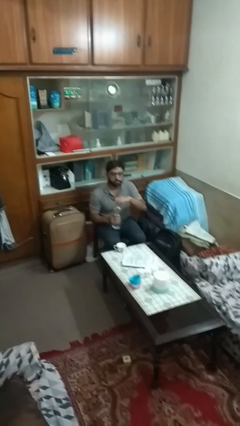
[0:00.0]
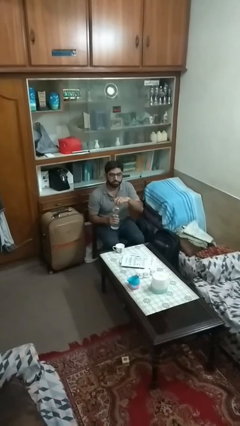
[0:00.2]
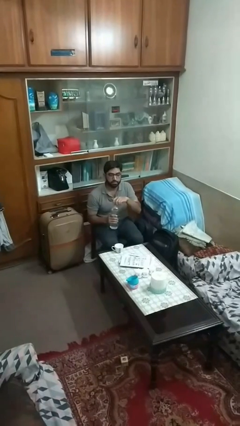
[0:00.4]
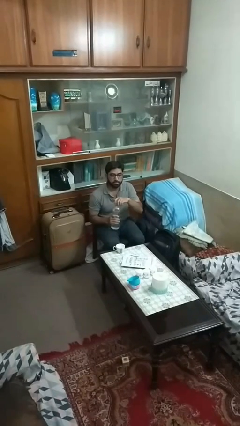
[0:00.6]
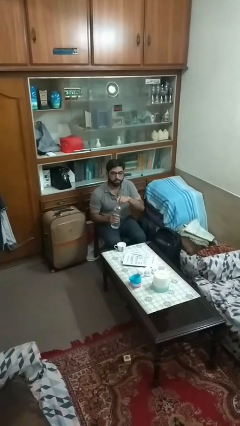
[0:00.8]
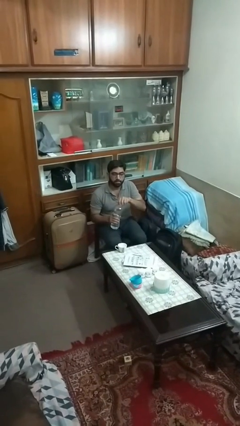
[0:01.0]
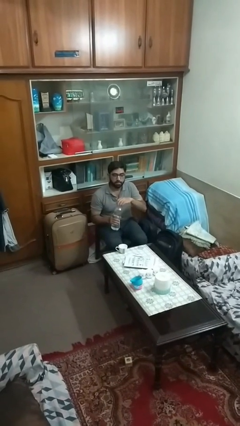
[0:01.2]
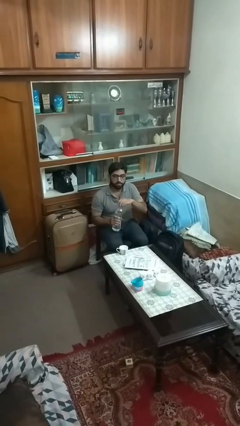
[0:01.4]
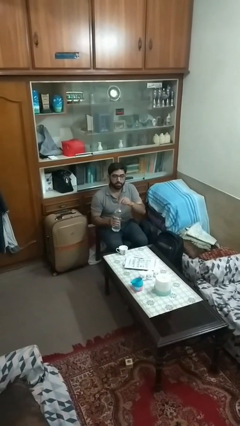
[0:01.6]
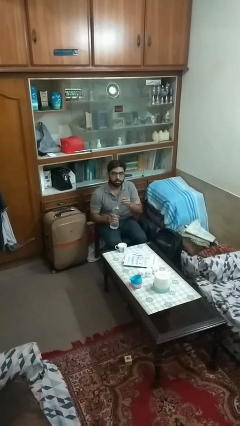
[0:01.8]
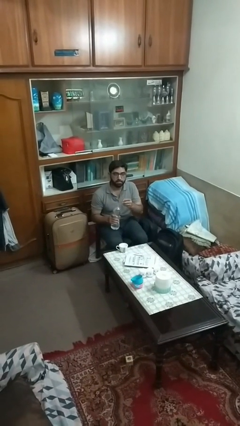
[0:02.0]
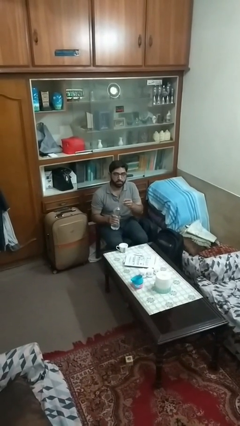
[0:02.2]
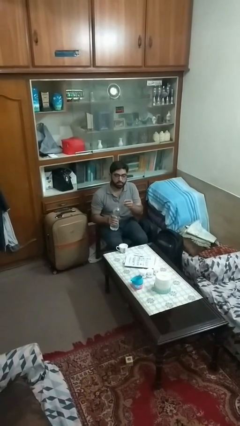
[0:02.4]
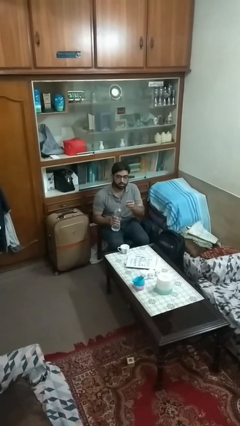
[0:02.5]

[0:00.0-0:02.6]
person unscrews lid from bottle

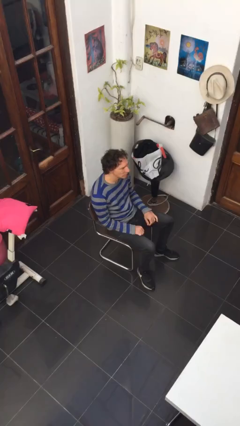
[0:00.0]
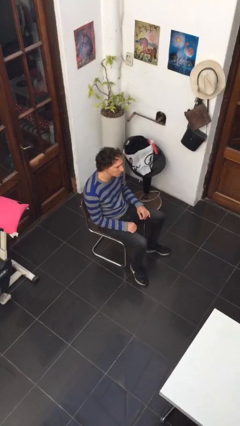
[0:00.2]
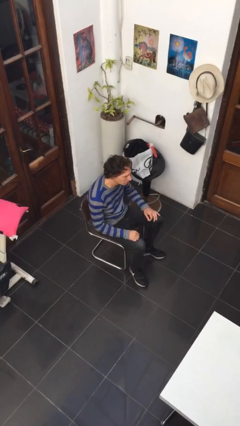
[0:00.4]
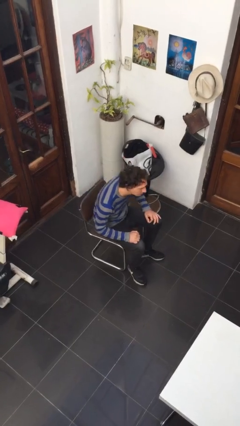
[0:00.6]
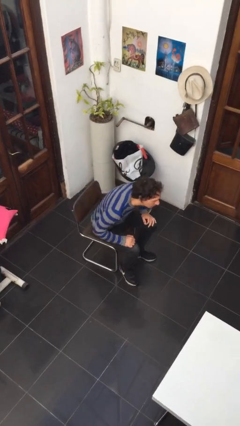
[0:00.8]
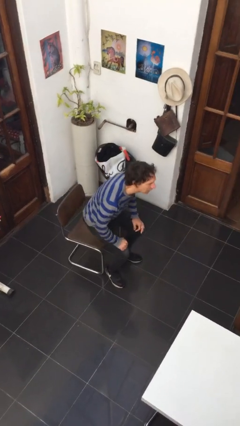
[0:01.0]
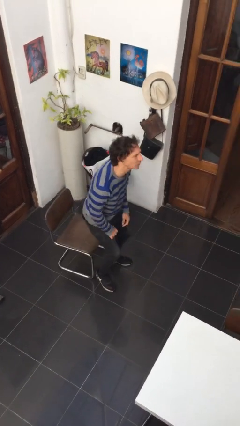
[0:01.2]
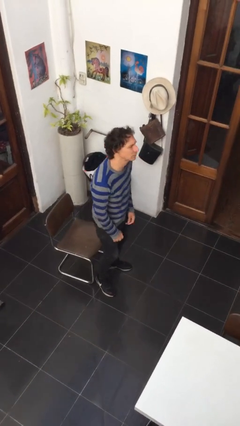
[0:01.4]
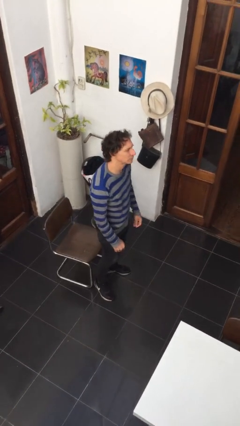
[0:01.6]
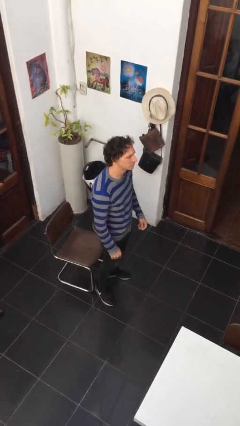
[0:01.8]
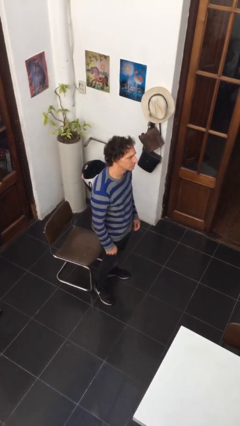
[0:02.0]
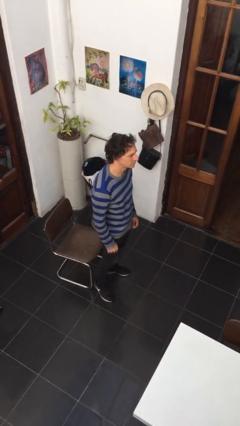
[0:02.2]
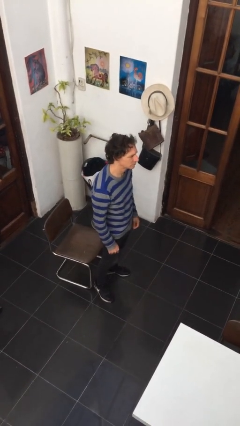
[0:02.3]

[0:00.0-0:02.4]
person stands up

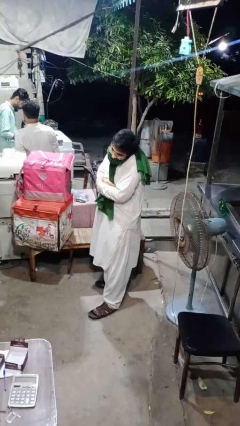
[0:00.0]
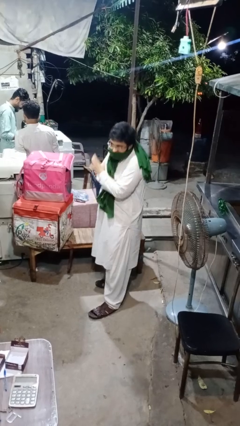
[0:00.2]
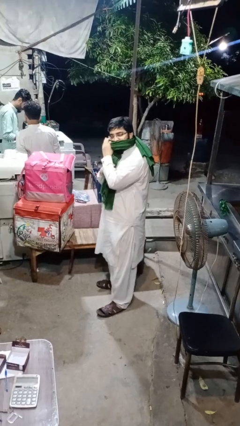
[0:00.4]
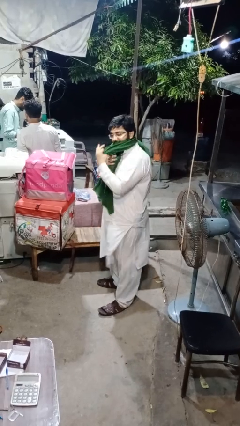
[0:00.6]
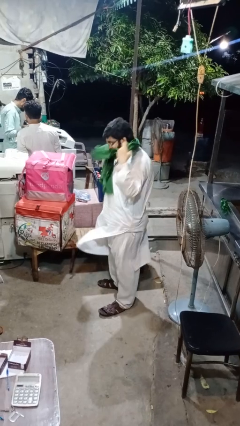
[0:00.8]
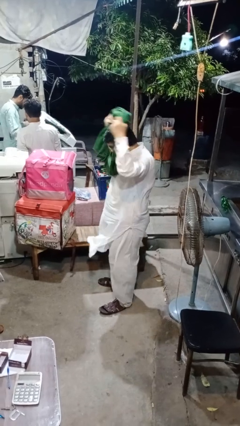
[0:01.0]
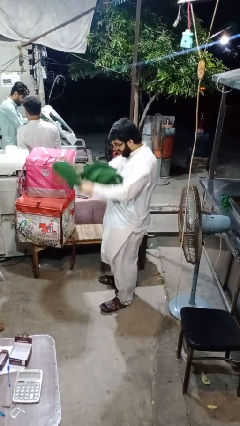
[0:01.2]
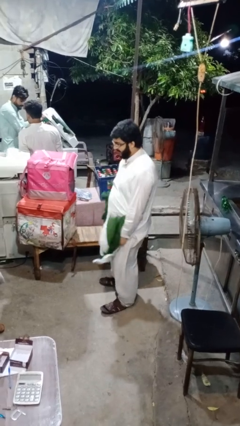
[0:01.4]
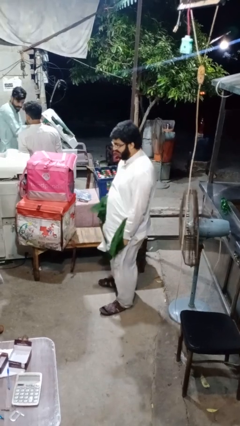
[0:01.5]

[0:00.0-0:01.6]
person takes off scarf

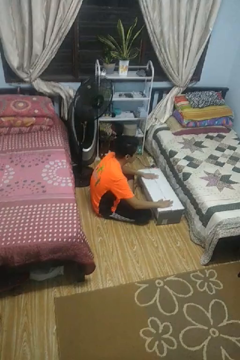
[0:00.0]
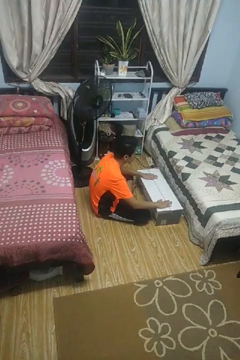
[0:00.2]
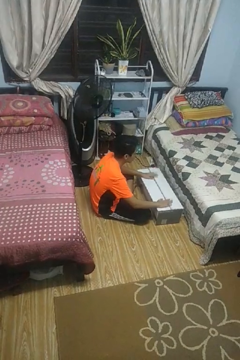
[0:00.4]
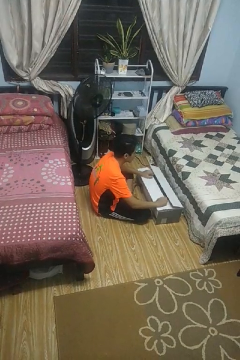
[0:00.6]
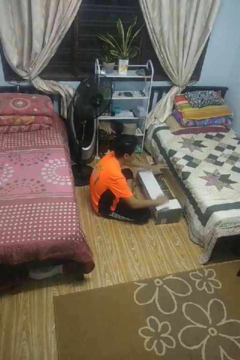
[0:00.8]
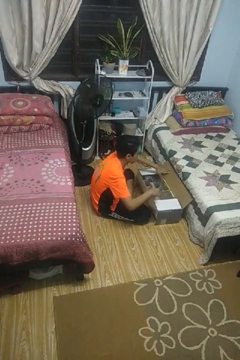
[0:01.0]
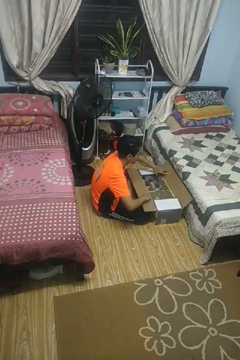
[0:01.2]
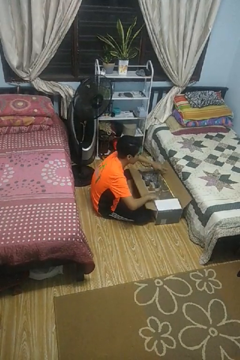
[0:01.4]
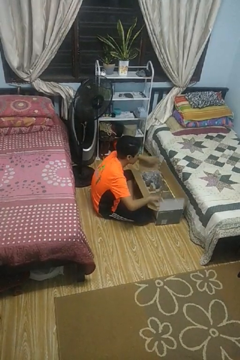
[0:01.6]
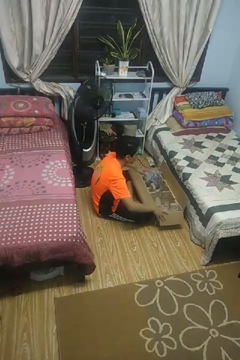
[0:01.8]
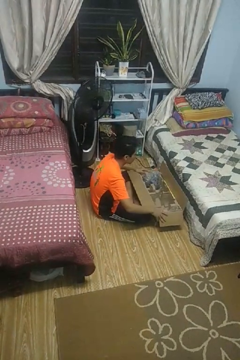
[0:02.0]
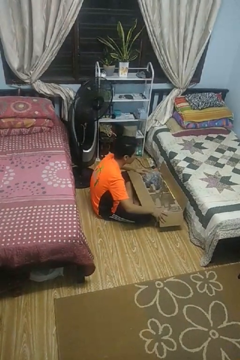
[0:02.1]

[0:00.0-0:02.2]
person opens box

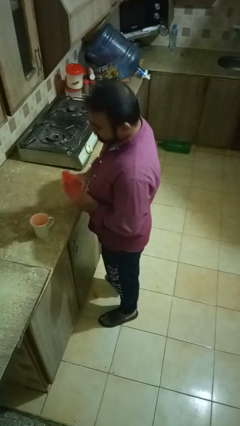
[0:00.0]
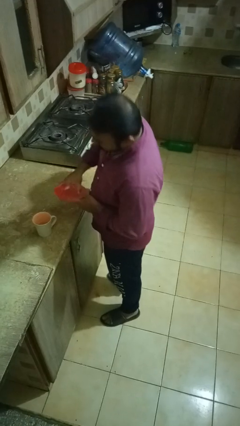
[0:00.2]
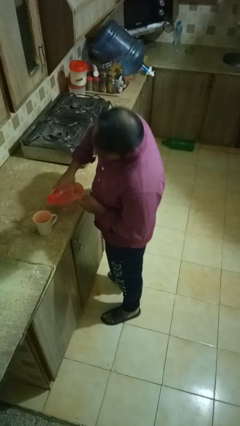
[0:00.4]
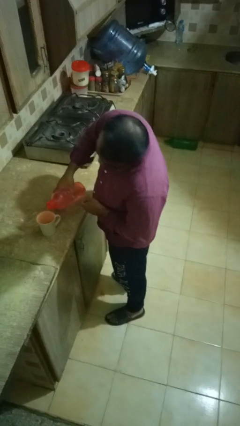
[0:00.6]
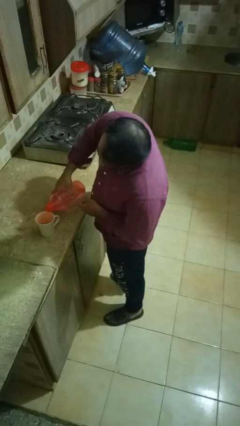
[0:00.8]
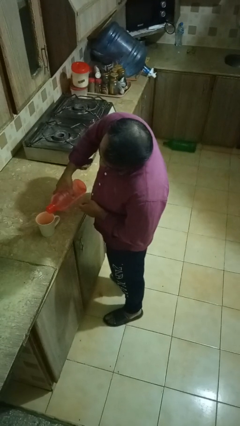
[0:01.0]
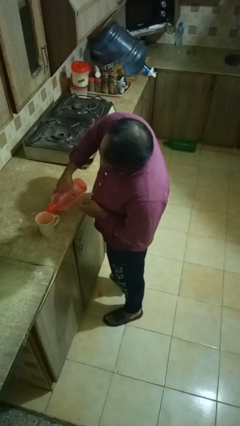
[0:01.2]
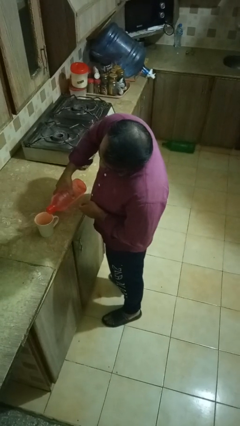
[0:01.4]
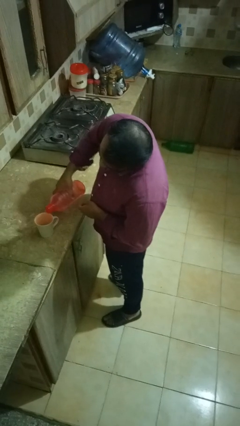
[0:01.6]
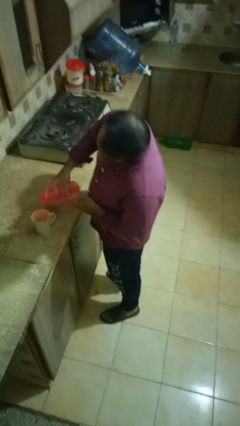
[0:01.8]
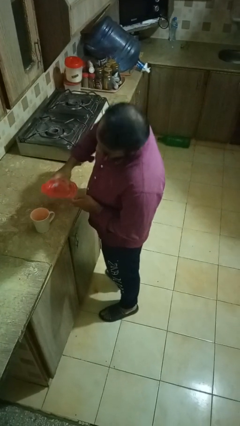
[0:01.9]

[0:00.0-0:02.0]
person pours liquid into cup

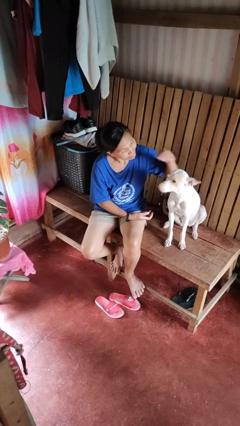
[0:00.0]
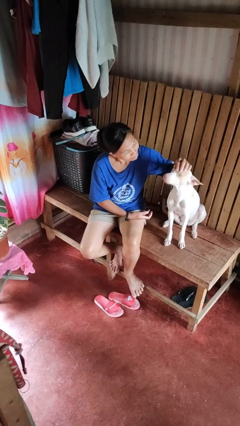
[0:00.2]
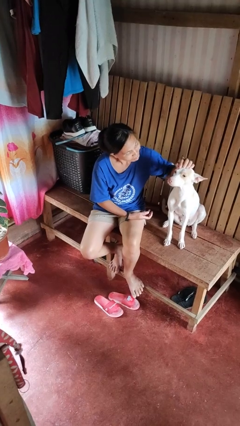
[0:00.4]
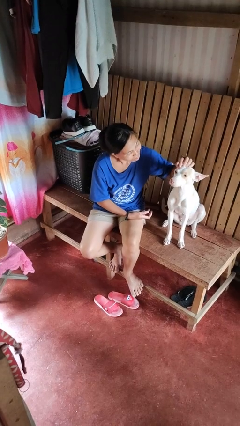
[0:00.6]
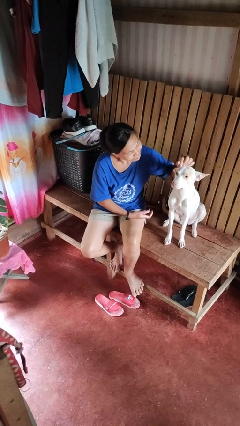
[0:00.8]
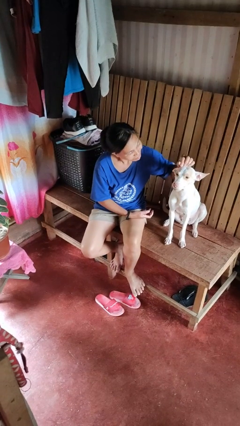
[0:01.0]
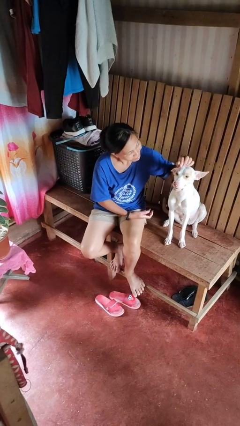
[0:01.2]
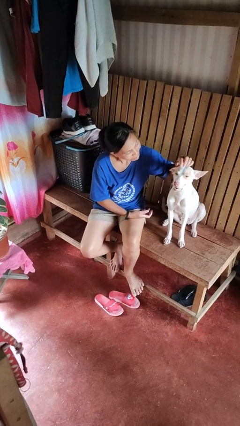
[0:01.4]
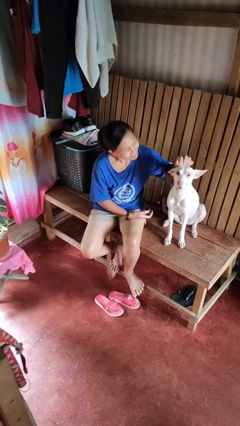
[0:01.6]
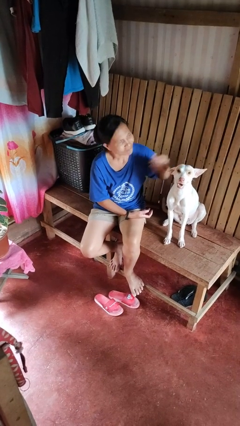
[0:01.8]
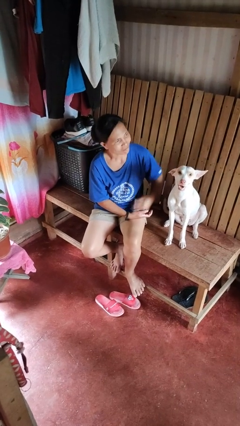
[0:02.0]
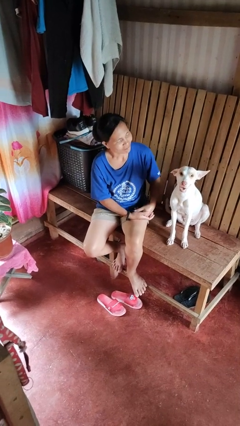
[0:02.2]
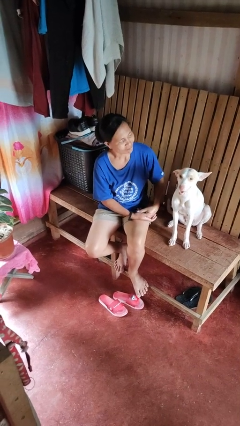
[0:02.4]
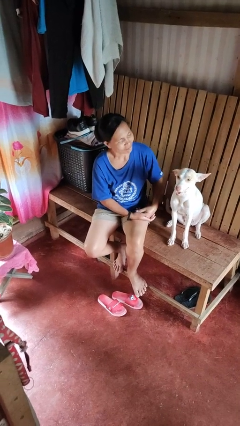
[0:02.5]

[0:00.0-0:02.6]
person pets dog

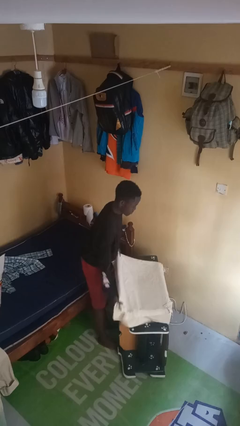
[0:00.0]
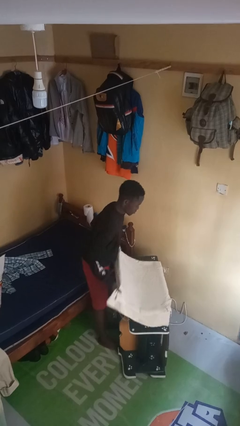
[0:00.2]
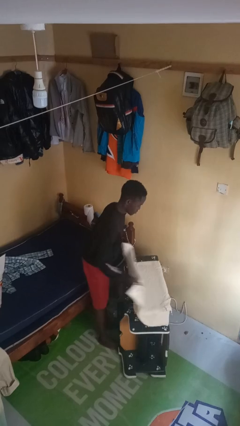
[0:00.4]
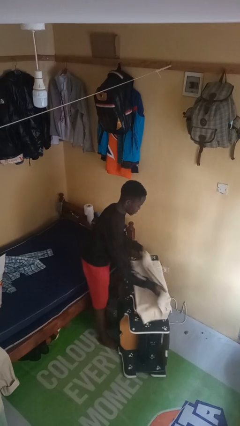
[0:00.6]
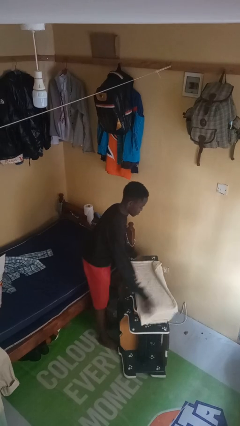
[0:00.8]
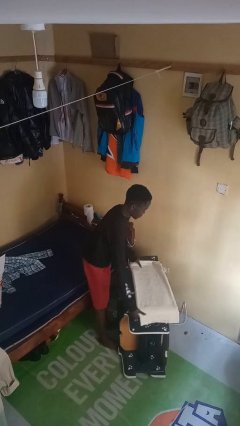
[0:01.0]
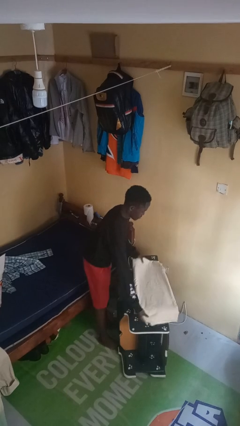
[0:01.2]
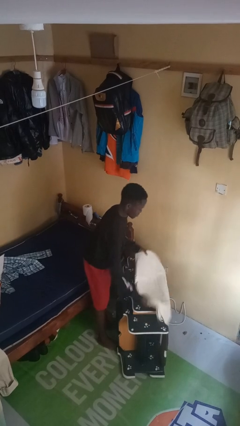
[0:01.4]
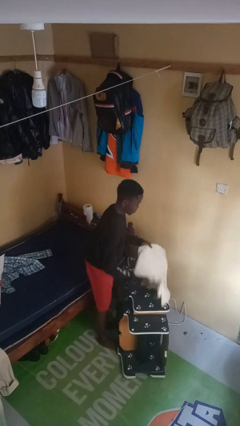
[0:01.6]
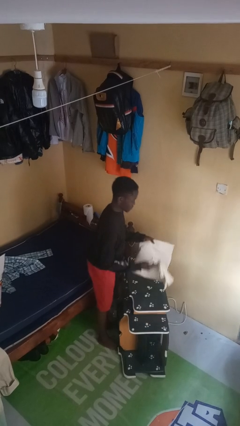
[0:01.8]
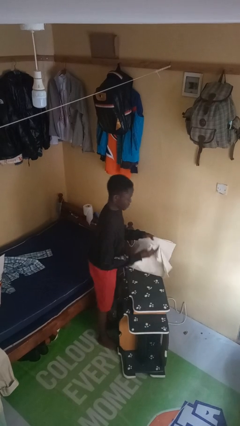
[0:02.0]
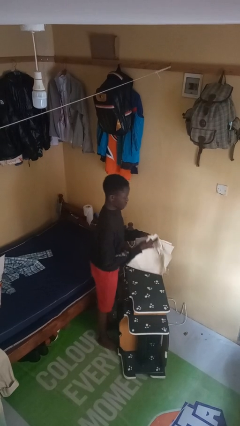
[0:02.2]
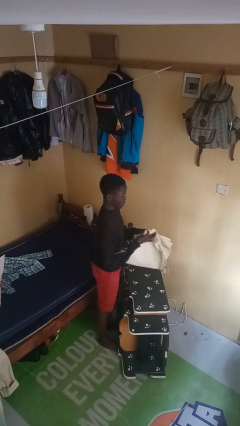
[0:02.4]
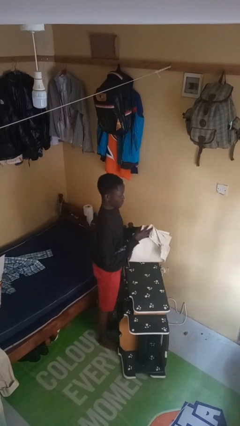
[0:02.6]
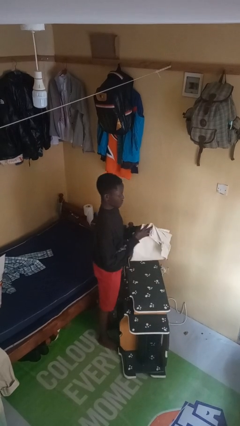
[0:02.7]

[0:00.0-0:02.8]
person folds tablecloth

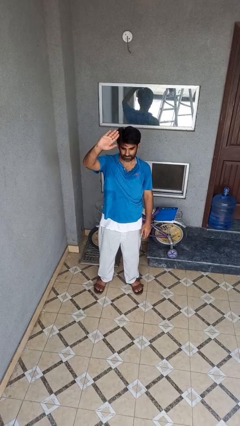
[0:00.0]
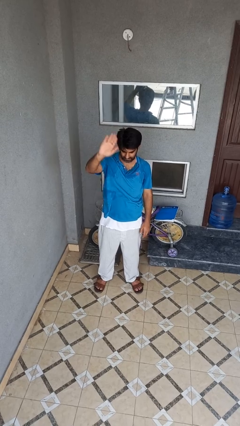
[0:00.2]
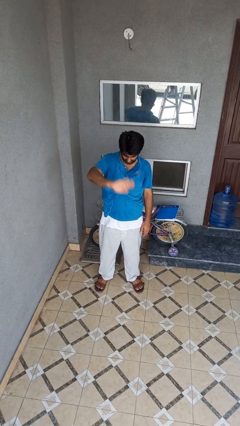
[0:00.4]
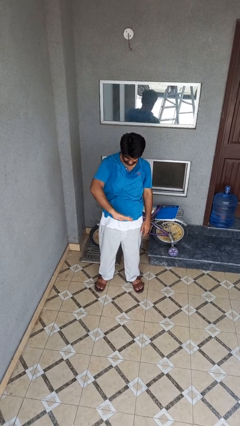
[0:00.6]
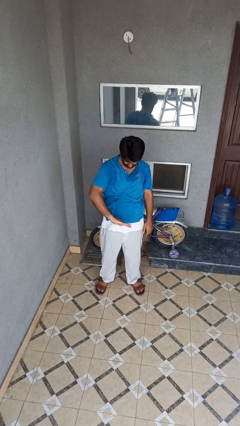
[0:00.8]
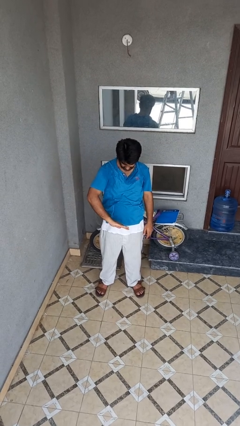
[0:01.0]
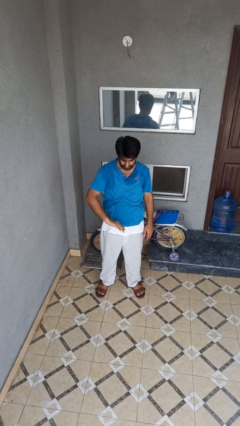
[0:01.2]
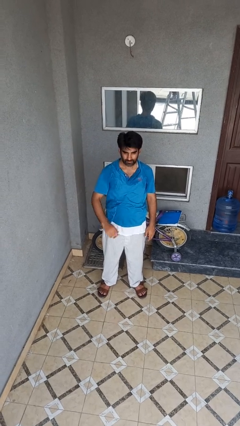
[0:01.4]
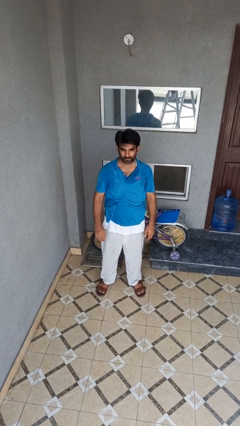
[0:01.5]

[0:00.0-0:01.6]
person gestures swipe down
